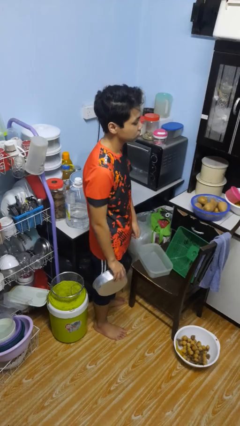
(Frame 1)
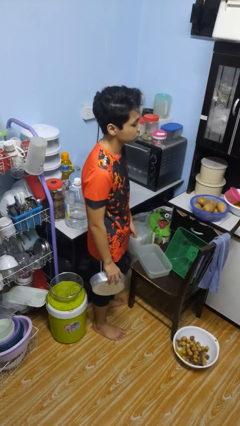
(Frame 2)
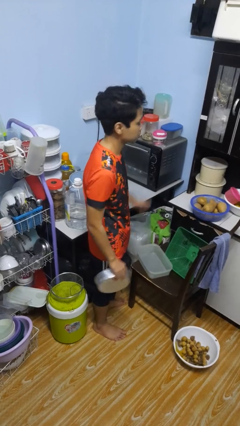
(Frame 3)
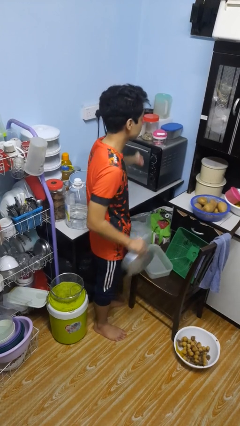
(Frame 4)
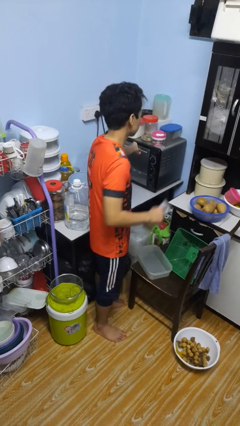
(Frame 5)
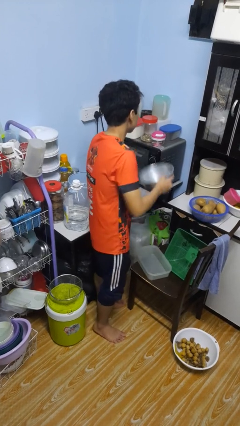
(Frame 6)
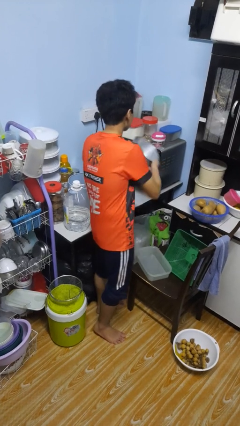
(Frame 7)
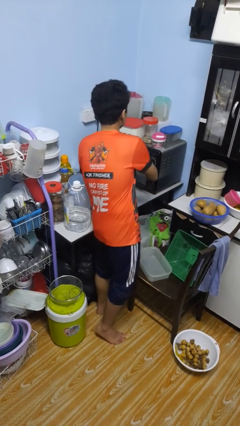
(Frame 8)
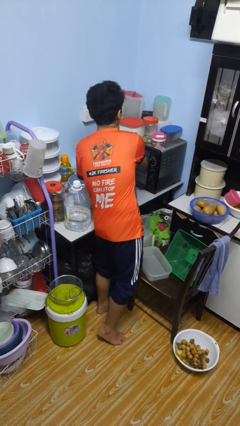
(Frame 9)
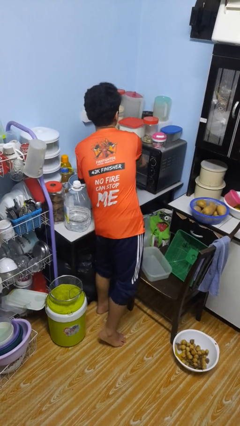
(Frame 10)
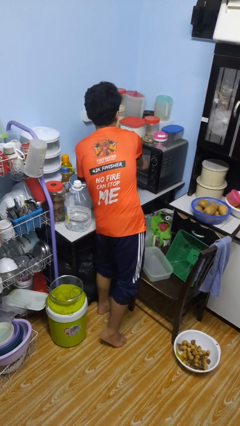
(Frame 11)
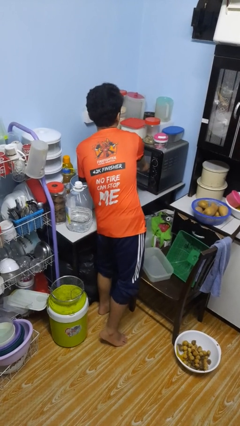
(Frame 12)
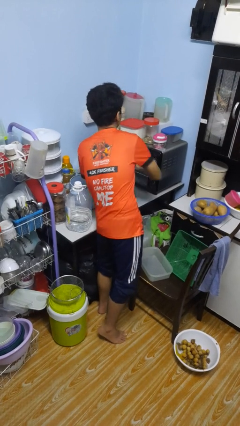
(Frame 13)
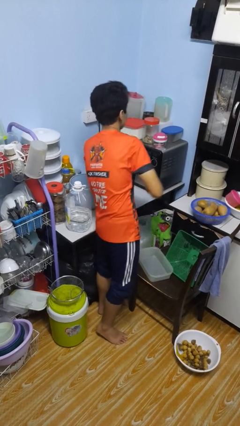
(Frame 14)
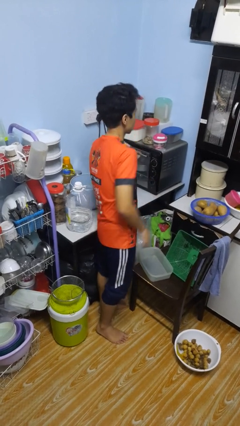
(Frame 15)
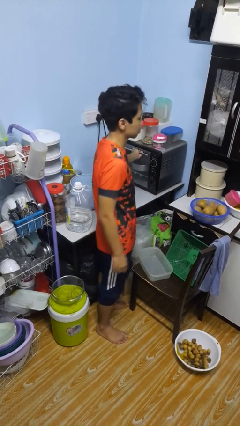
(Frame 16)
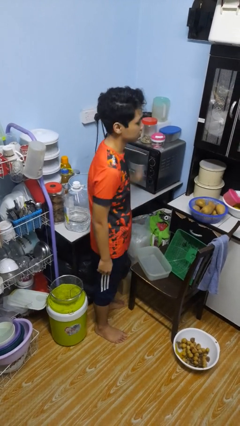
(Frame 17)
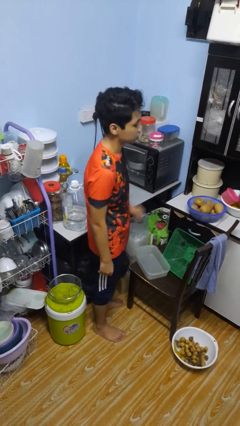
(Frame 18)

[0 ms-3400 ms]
person puts object into oven

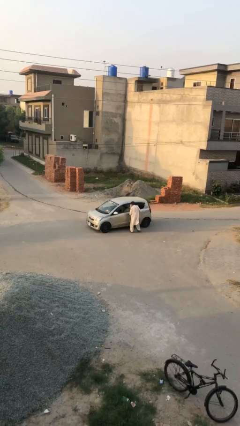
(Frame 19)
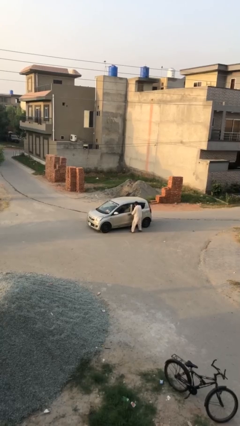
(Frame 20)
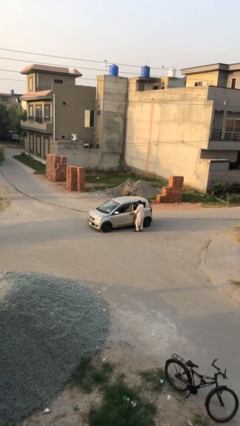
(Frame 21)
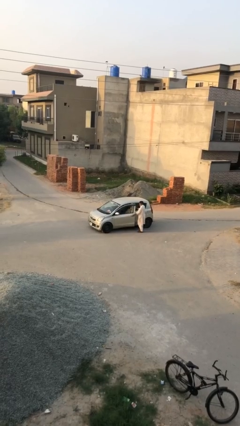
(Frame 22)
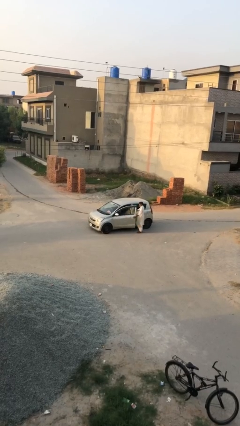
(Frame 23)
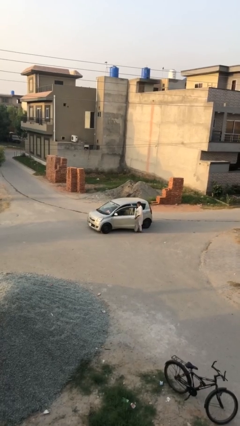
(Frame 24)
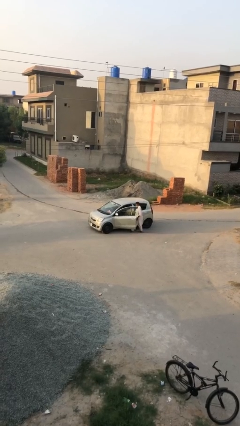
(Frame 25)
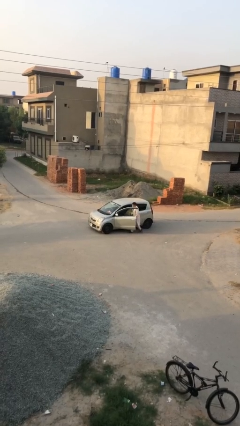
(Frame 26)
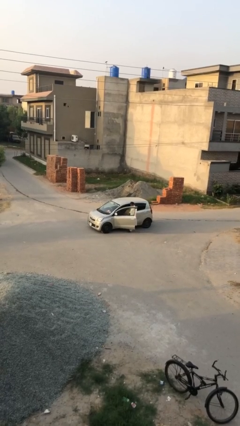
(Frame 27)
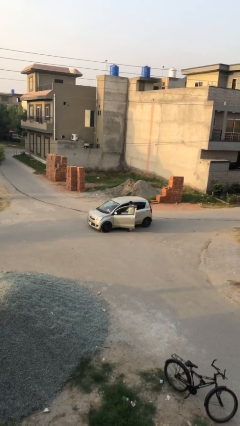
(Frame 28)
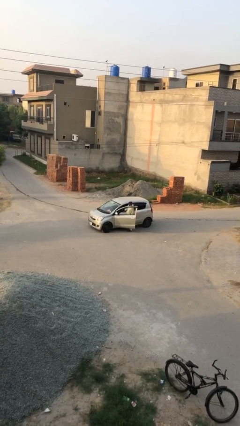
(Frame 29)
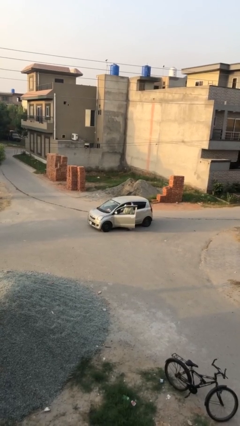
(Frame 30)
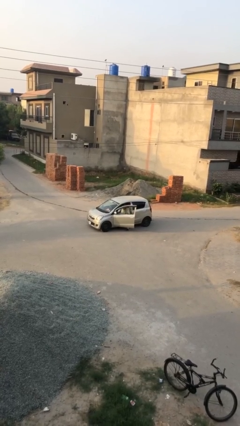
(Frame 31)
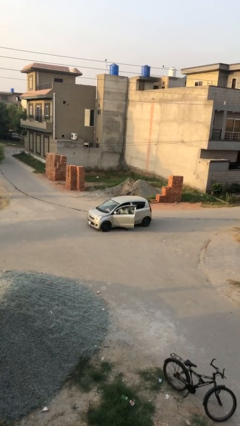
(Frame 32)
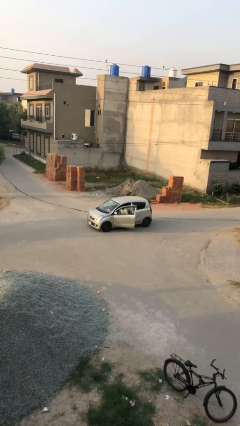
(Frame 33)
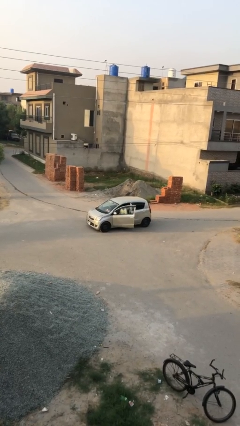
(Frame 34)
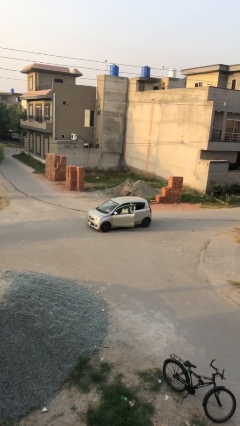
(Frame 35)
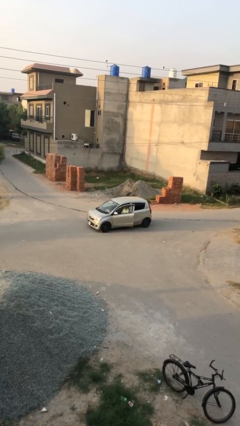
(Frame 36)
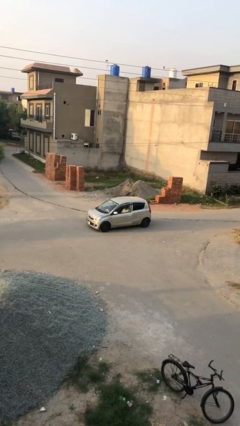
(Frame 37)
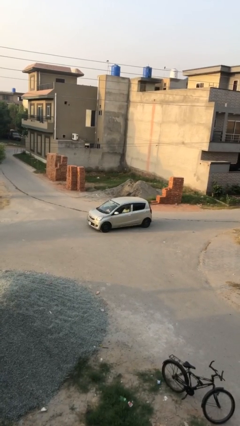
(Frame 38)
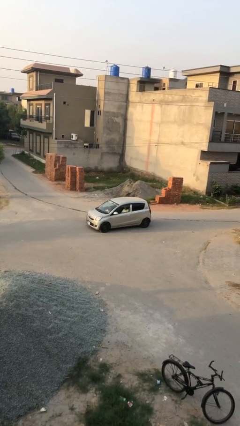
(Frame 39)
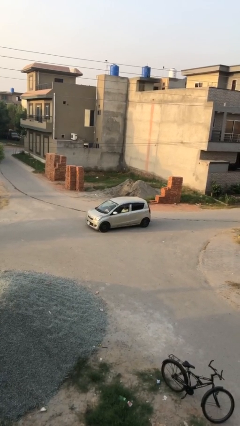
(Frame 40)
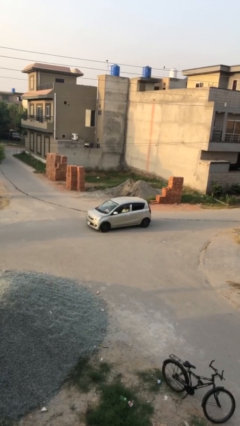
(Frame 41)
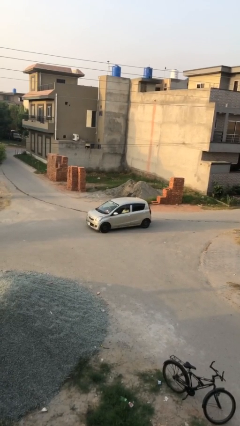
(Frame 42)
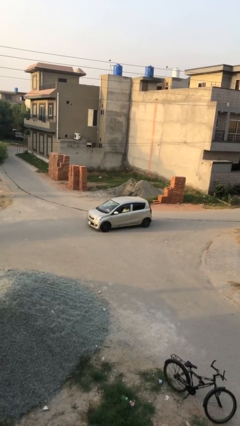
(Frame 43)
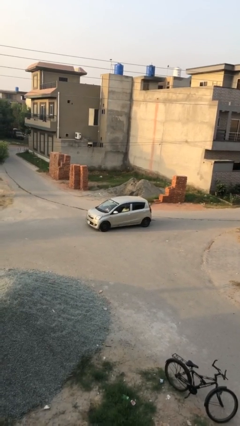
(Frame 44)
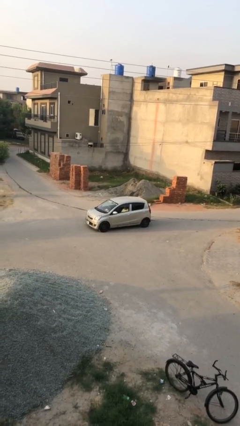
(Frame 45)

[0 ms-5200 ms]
car picks up person

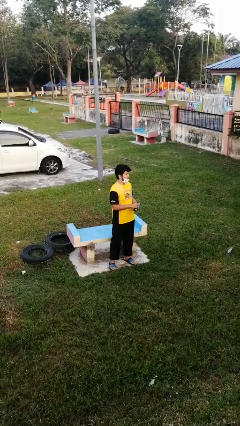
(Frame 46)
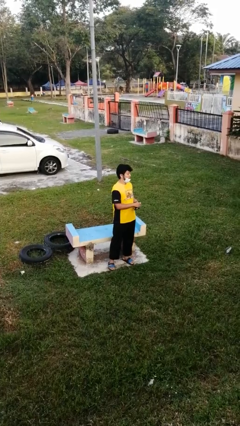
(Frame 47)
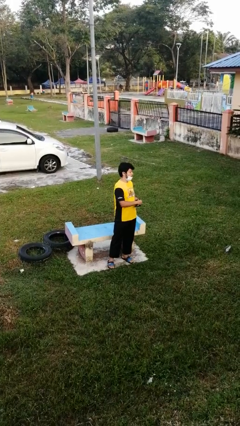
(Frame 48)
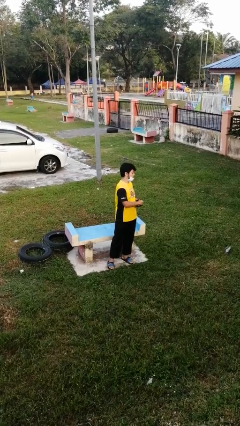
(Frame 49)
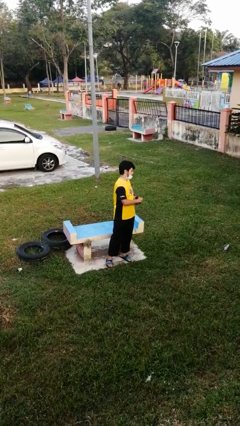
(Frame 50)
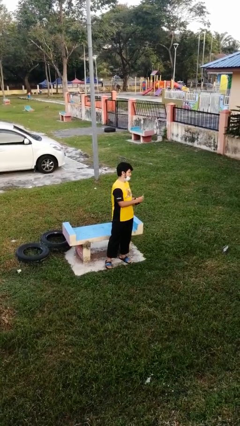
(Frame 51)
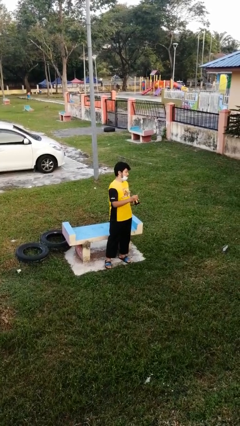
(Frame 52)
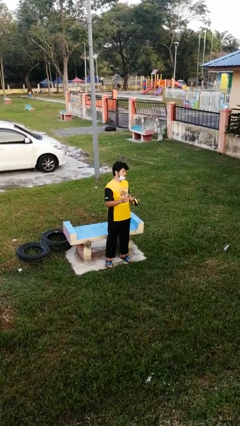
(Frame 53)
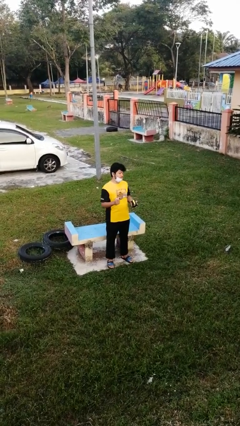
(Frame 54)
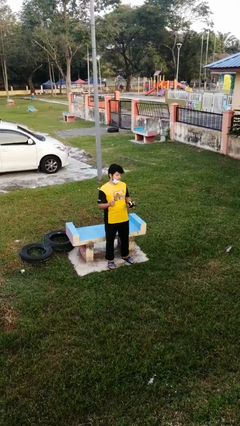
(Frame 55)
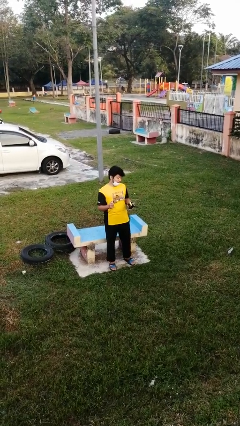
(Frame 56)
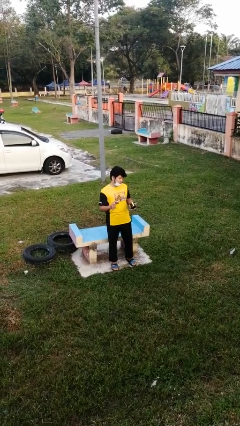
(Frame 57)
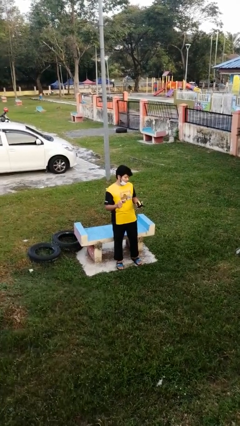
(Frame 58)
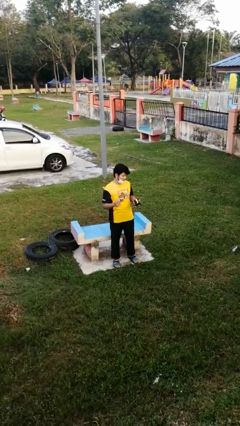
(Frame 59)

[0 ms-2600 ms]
person takes object from purse

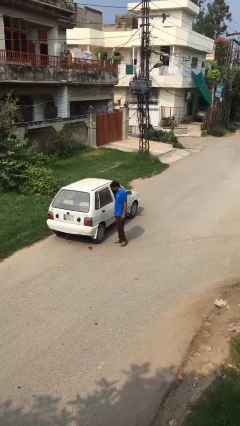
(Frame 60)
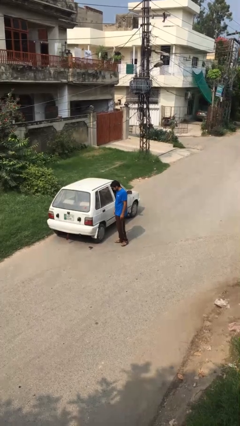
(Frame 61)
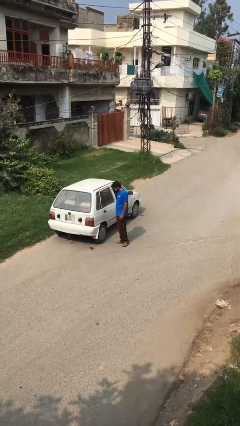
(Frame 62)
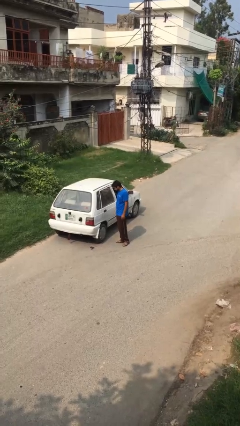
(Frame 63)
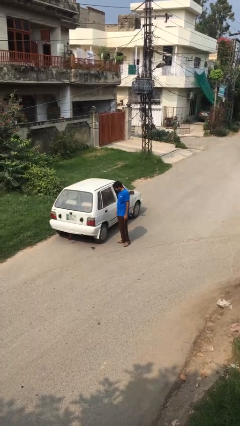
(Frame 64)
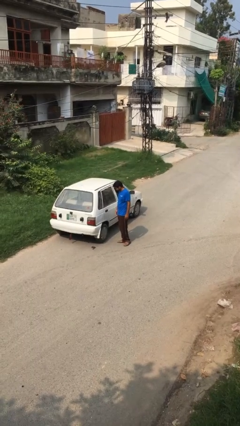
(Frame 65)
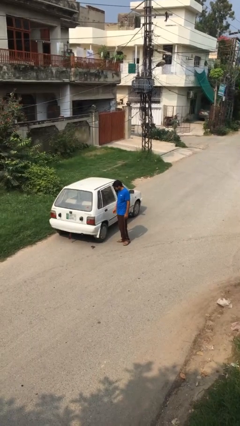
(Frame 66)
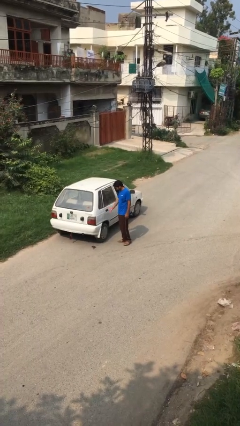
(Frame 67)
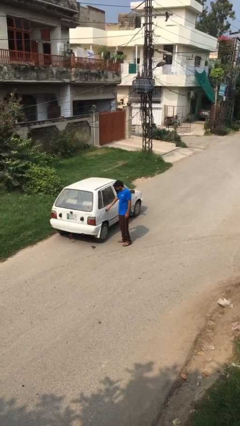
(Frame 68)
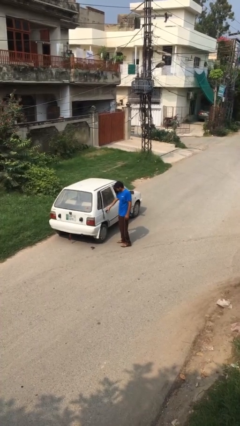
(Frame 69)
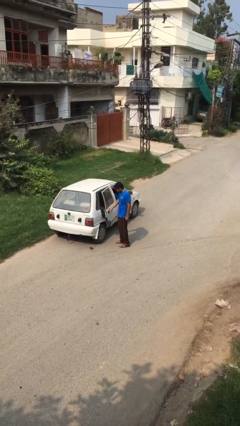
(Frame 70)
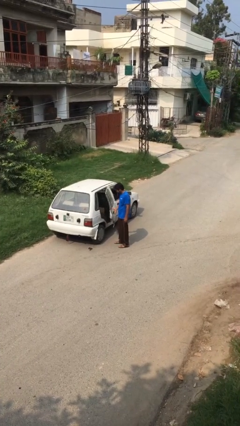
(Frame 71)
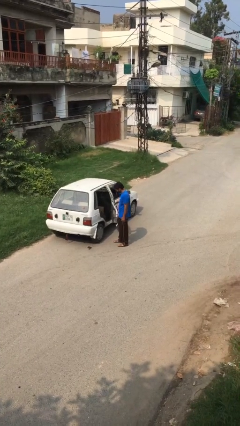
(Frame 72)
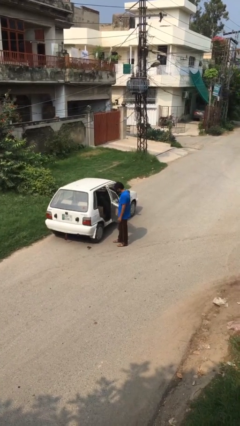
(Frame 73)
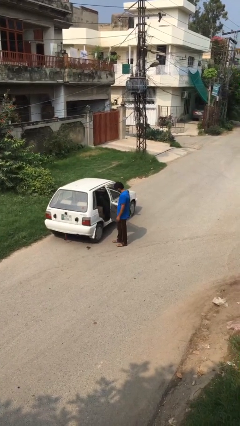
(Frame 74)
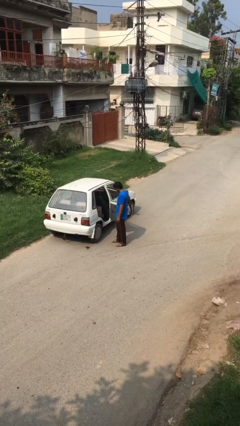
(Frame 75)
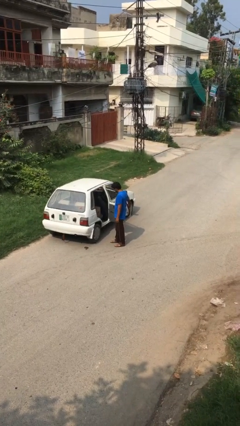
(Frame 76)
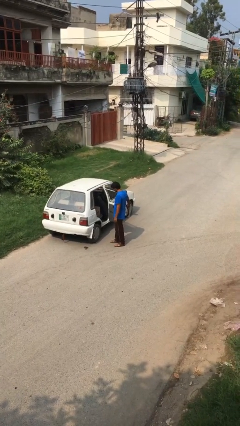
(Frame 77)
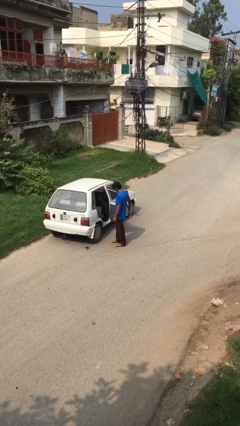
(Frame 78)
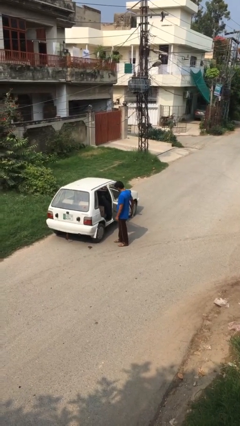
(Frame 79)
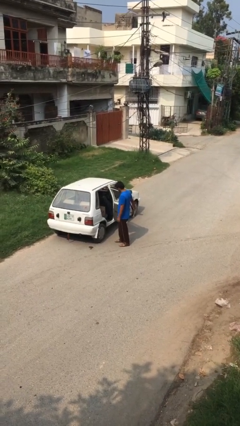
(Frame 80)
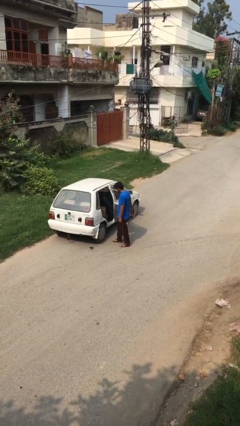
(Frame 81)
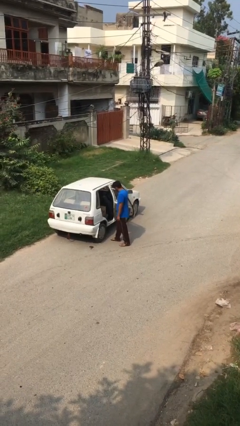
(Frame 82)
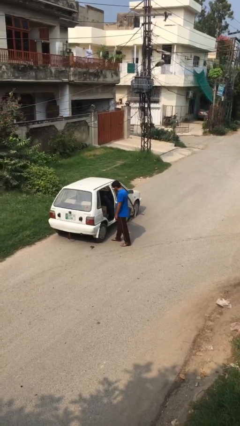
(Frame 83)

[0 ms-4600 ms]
person opens car door

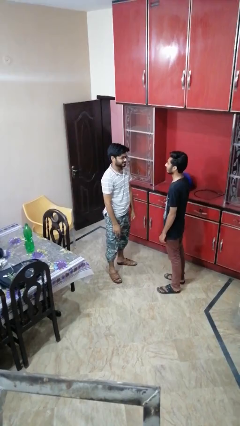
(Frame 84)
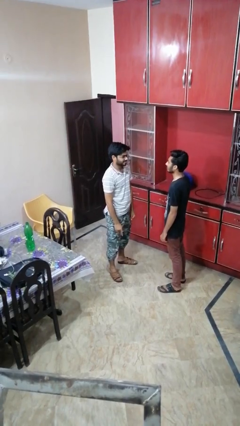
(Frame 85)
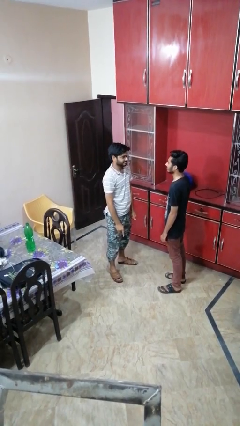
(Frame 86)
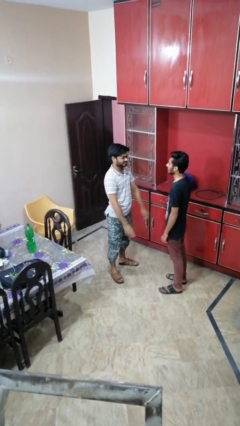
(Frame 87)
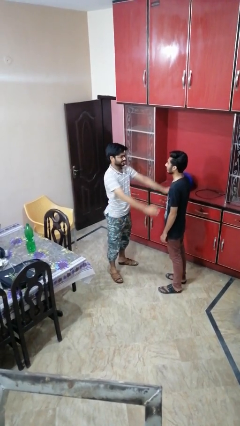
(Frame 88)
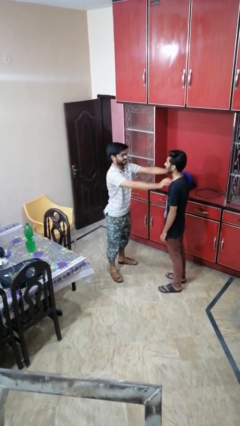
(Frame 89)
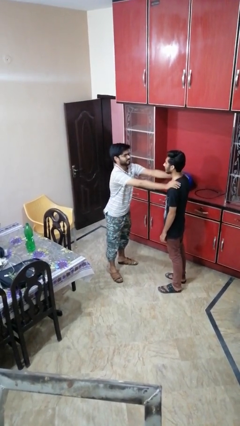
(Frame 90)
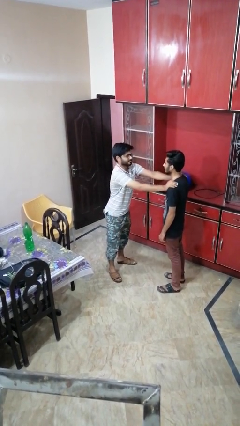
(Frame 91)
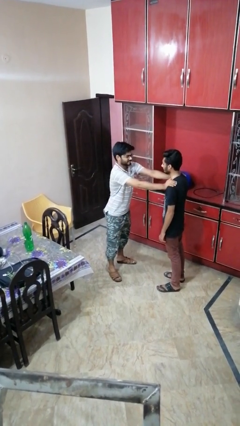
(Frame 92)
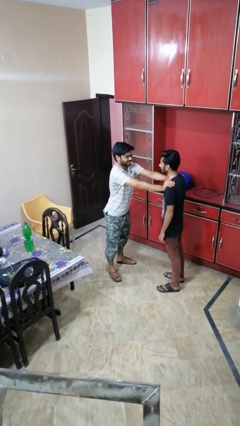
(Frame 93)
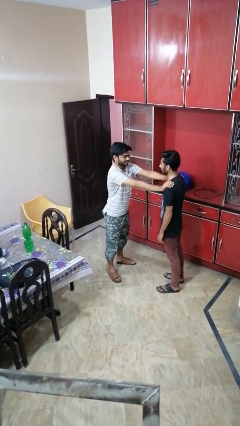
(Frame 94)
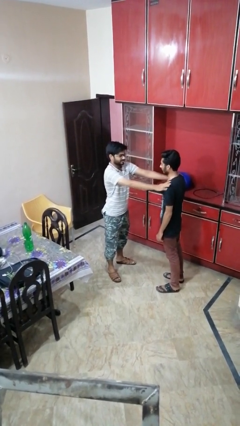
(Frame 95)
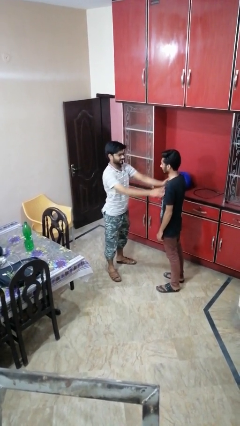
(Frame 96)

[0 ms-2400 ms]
person pounds shoulders of person
